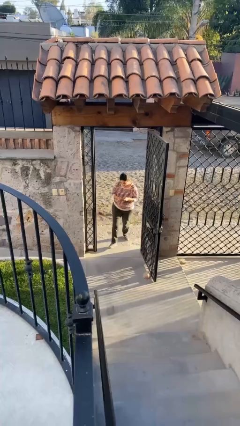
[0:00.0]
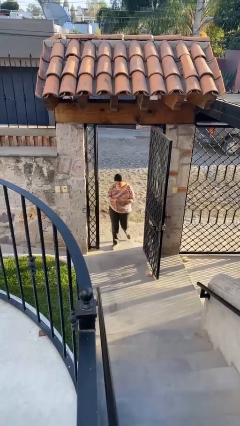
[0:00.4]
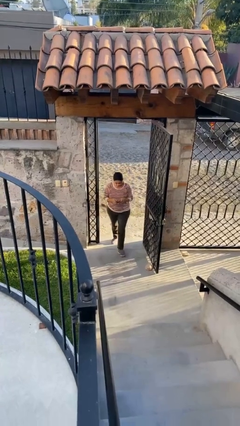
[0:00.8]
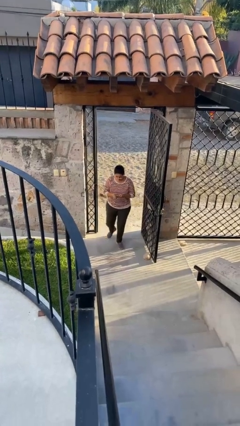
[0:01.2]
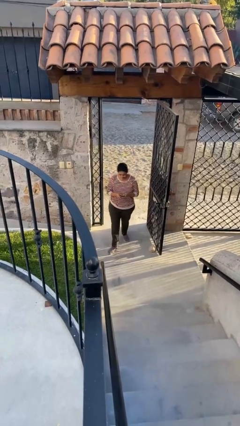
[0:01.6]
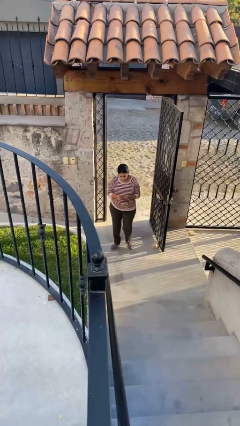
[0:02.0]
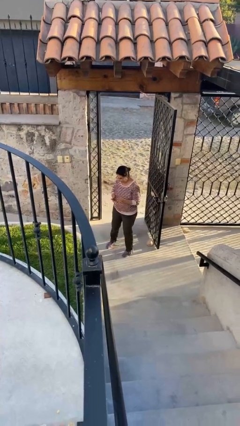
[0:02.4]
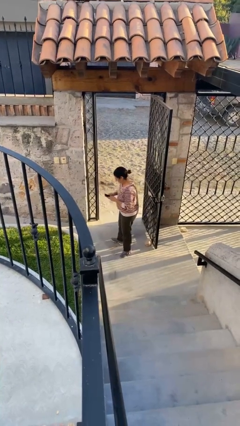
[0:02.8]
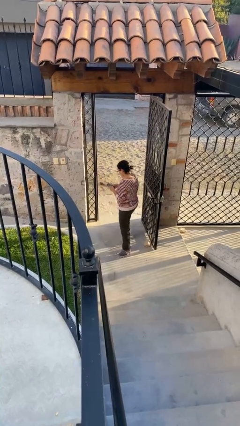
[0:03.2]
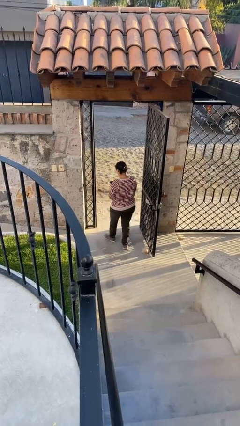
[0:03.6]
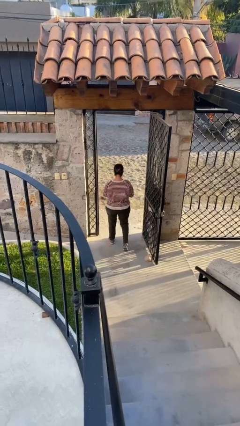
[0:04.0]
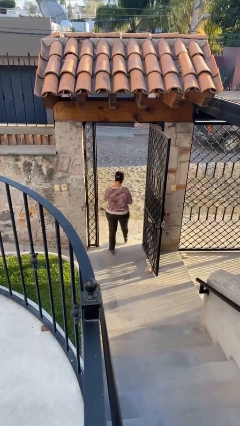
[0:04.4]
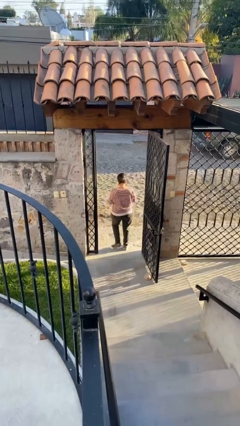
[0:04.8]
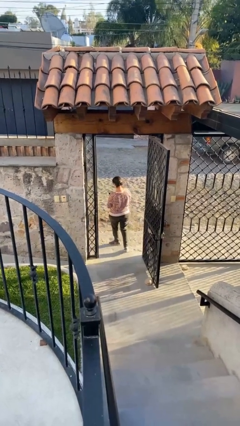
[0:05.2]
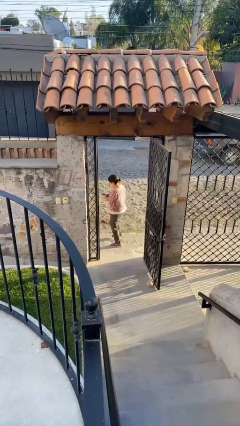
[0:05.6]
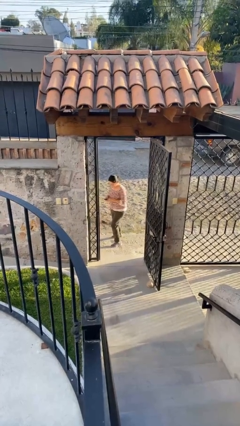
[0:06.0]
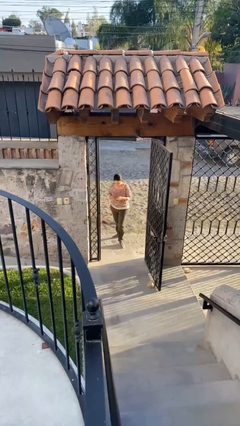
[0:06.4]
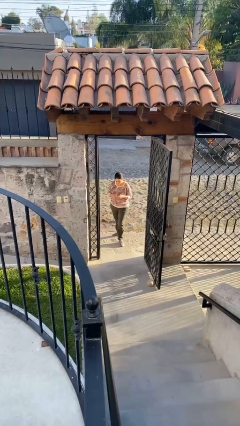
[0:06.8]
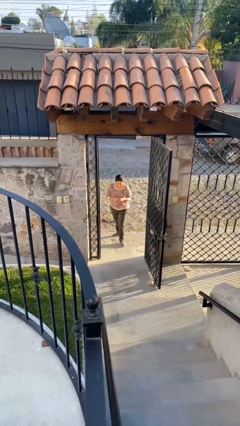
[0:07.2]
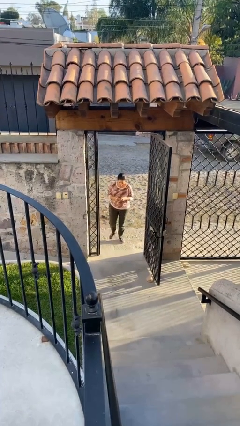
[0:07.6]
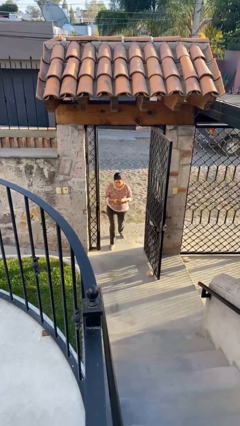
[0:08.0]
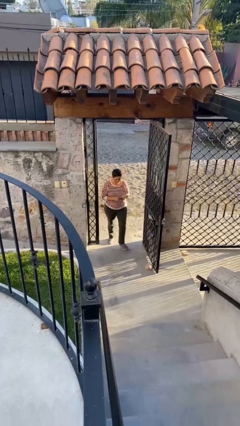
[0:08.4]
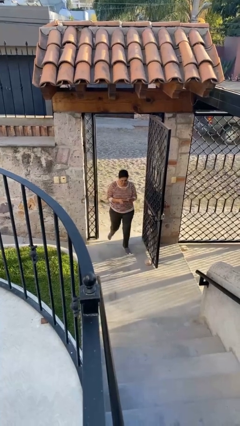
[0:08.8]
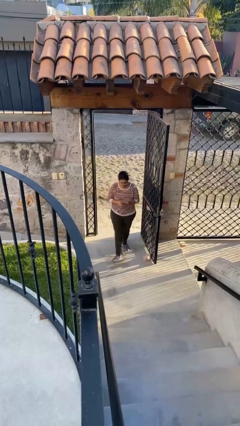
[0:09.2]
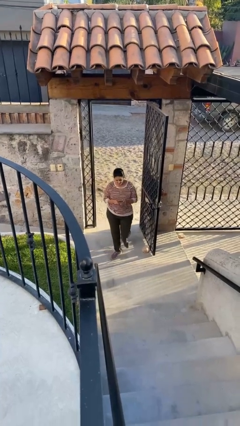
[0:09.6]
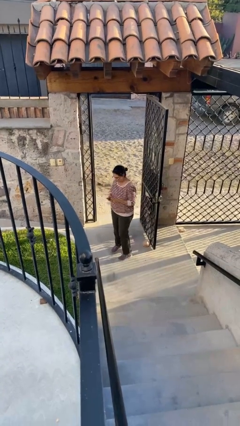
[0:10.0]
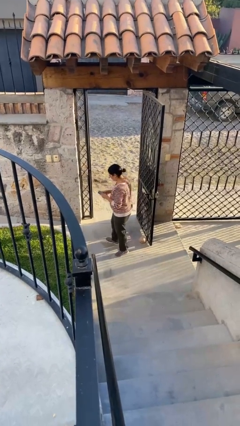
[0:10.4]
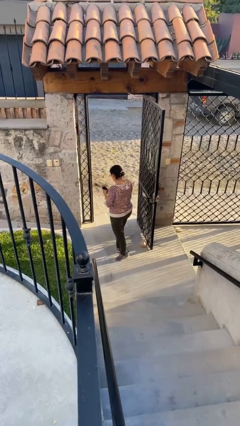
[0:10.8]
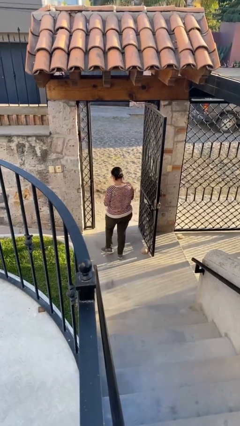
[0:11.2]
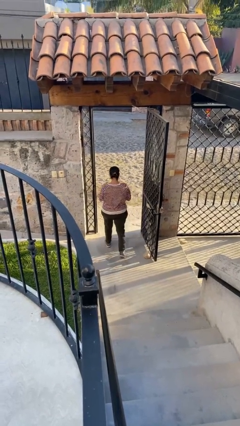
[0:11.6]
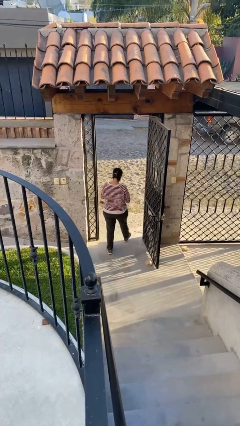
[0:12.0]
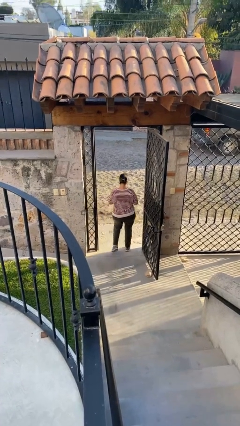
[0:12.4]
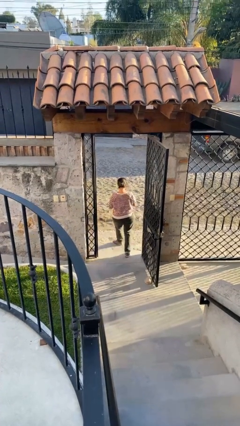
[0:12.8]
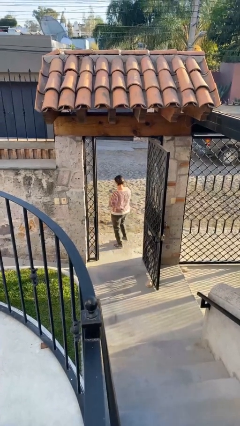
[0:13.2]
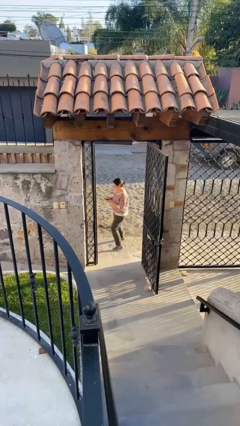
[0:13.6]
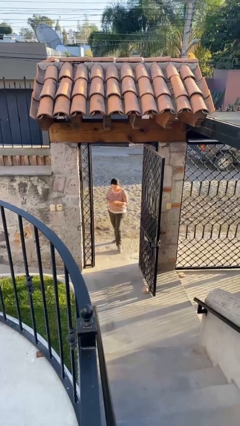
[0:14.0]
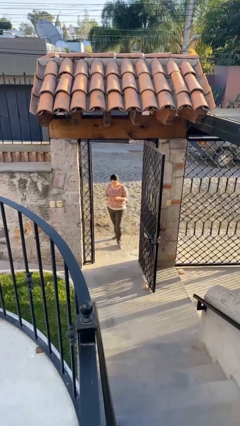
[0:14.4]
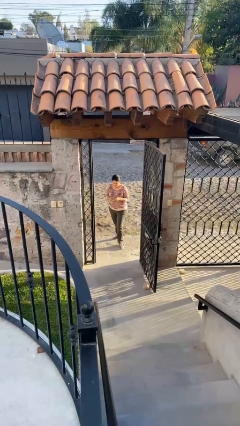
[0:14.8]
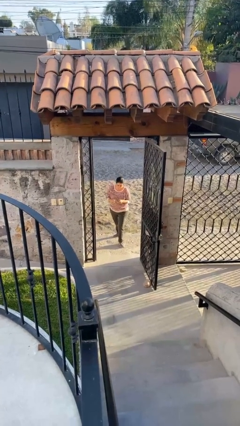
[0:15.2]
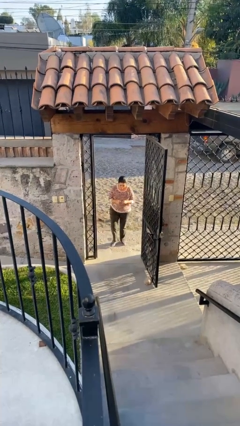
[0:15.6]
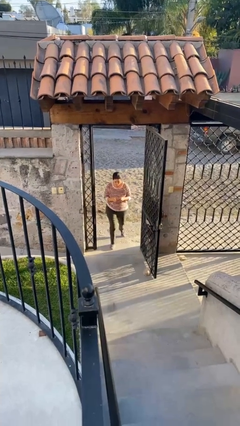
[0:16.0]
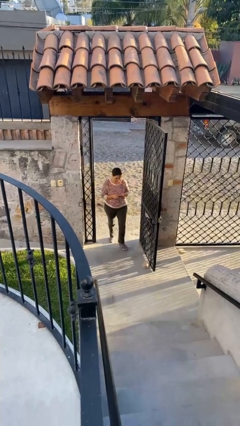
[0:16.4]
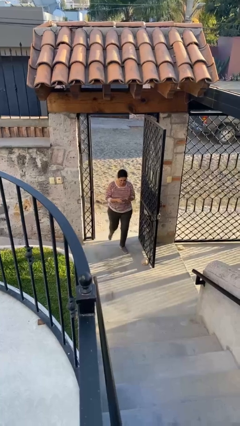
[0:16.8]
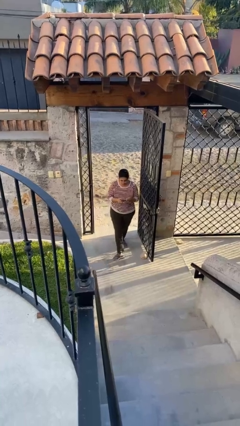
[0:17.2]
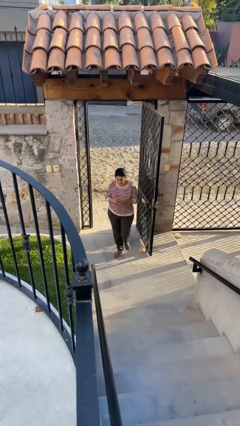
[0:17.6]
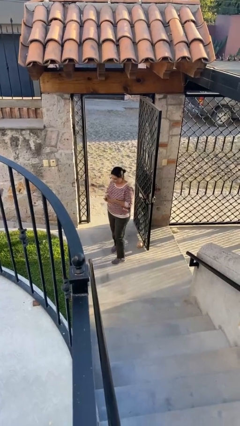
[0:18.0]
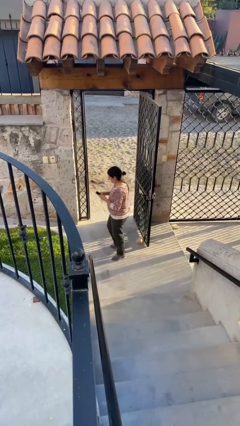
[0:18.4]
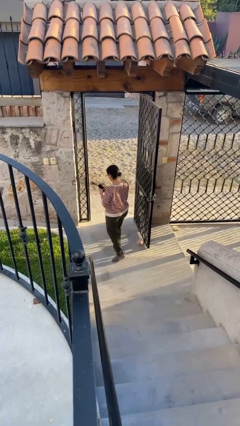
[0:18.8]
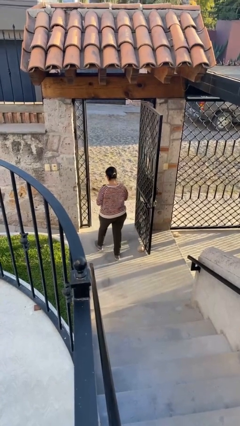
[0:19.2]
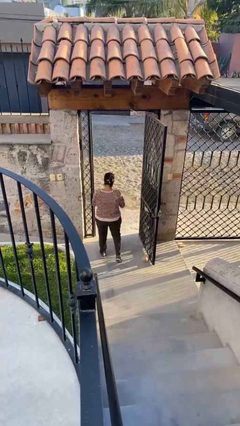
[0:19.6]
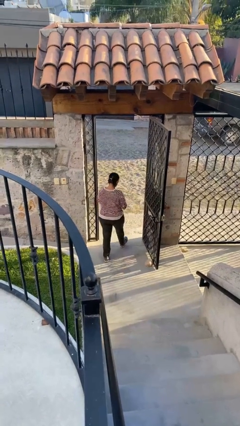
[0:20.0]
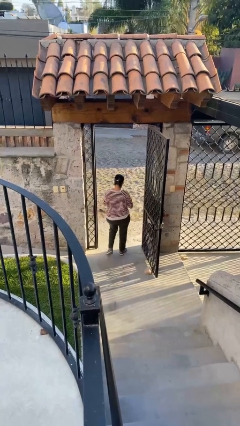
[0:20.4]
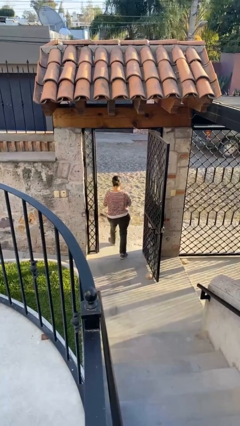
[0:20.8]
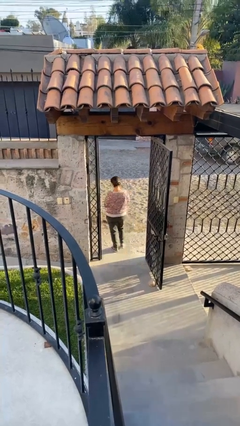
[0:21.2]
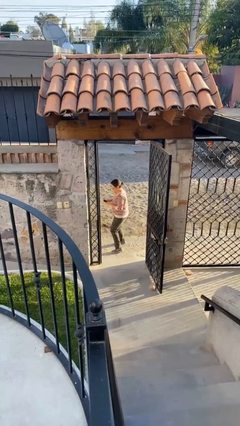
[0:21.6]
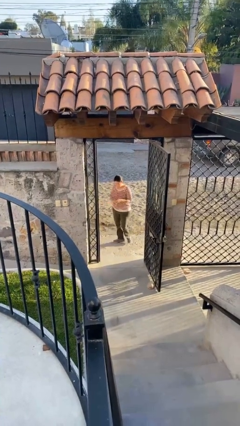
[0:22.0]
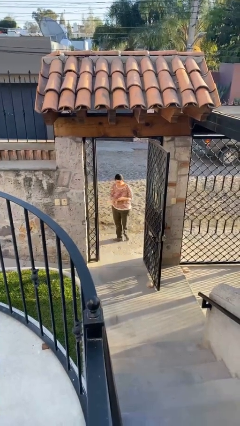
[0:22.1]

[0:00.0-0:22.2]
person texts on phone

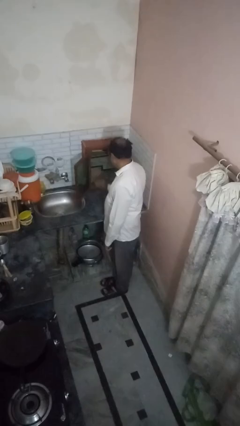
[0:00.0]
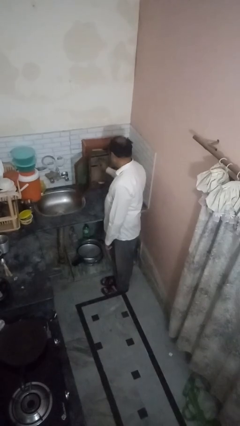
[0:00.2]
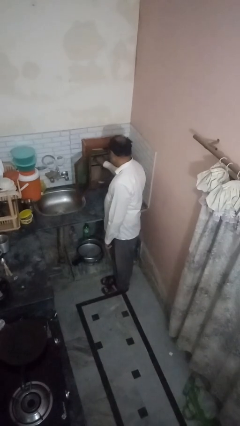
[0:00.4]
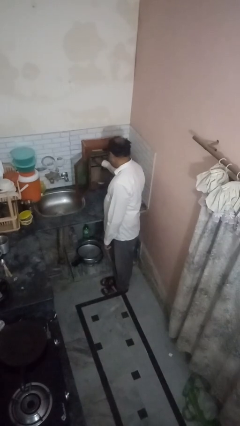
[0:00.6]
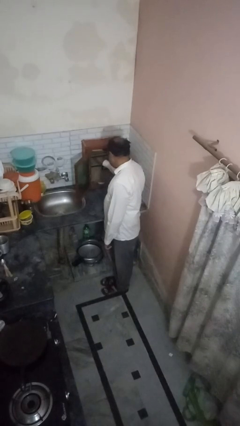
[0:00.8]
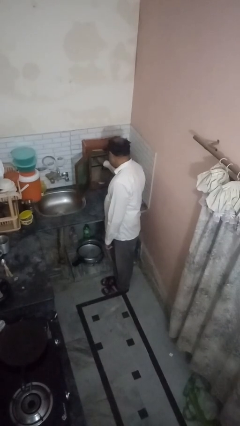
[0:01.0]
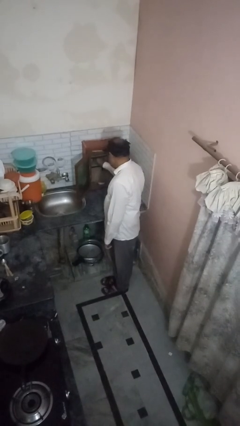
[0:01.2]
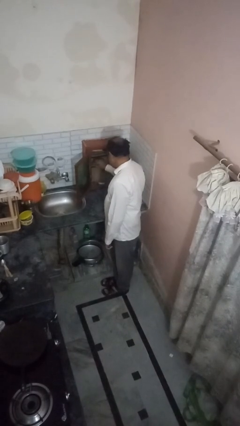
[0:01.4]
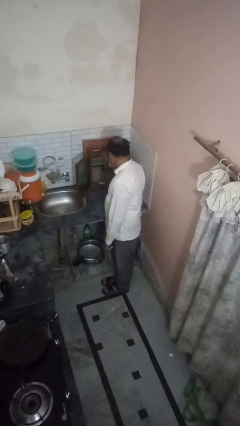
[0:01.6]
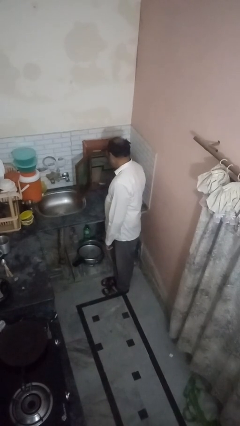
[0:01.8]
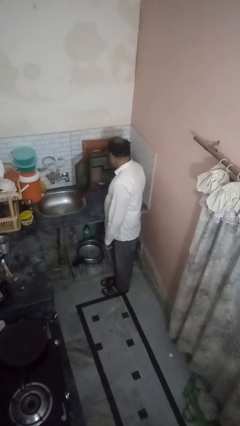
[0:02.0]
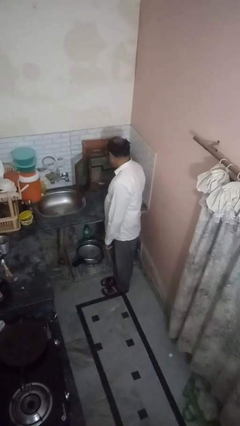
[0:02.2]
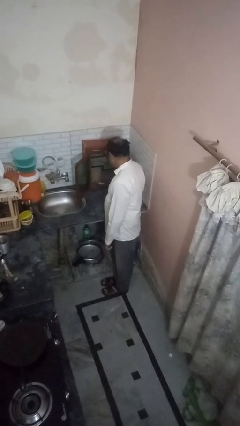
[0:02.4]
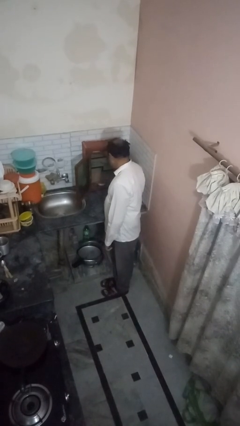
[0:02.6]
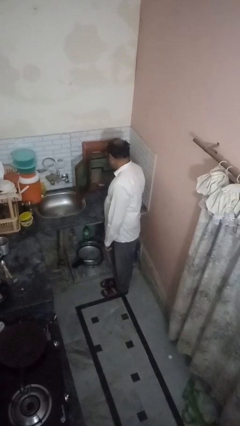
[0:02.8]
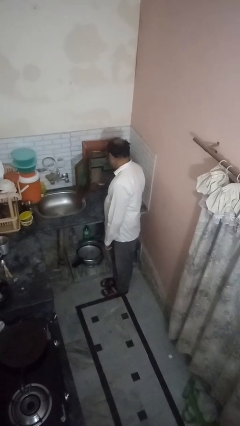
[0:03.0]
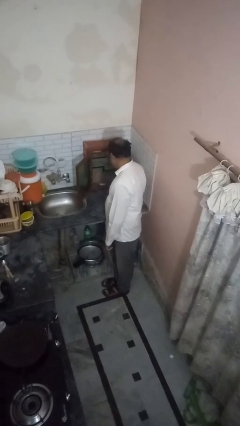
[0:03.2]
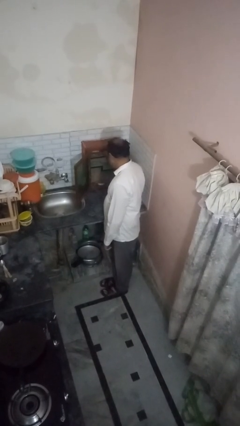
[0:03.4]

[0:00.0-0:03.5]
person searches in kitchen drawer

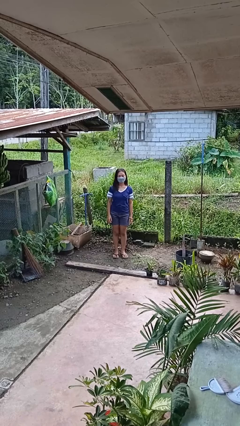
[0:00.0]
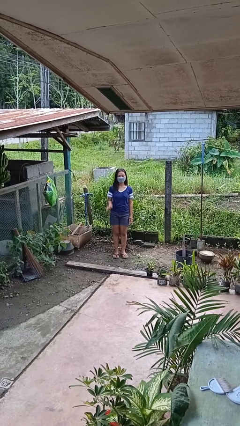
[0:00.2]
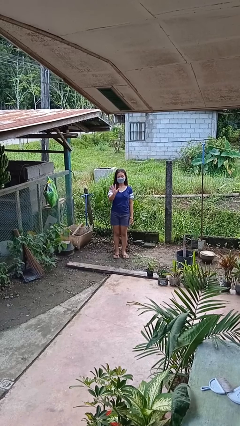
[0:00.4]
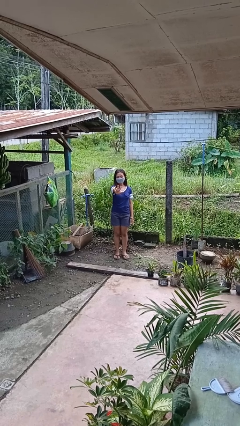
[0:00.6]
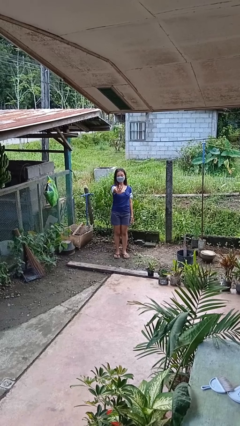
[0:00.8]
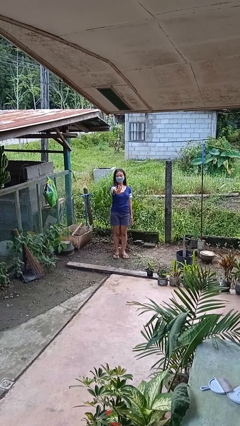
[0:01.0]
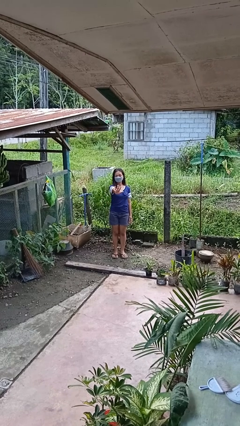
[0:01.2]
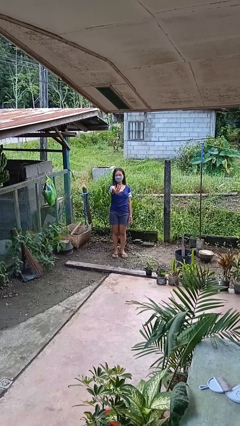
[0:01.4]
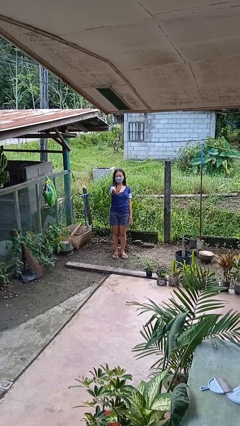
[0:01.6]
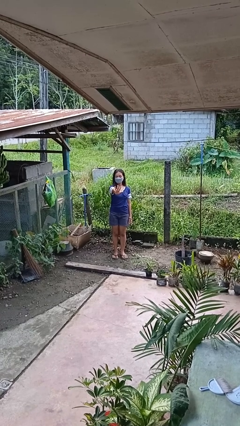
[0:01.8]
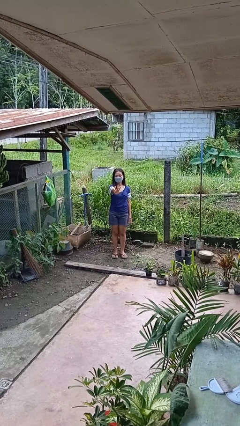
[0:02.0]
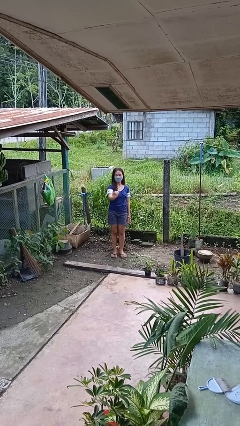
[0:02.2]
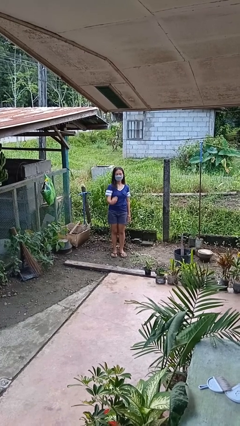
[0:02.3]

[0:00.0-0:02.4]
person gestures number five

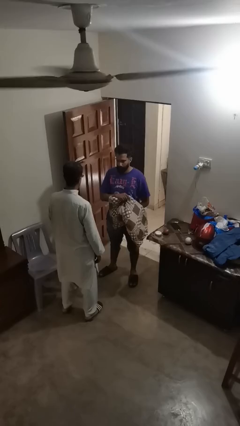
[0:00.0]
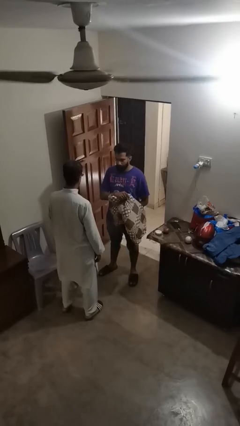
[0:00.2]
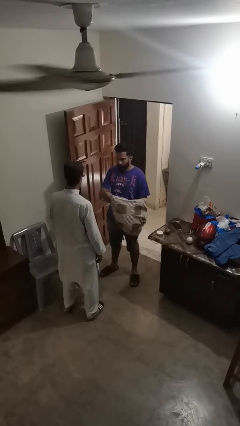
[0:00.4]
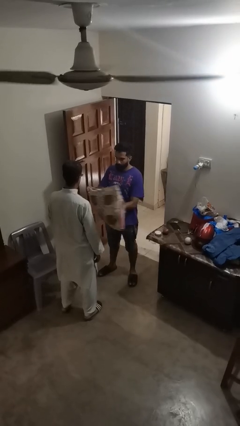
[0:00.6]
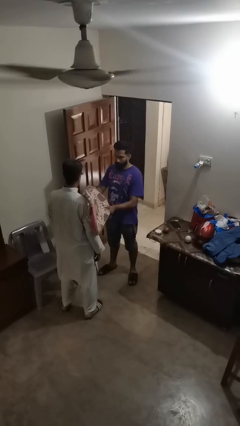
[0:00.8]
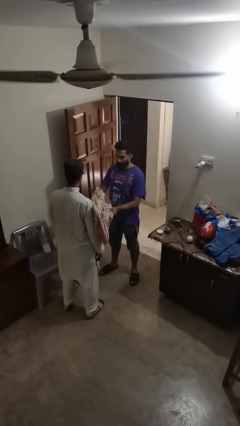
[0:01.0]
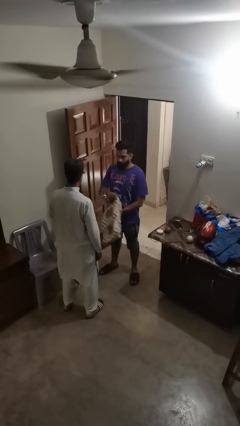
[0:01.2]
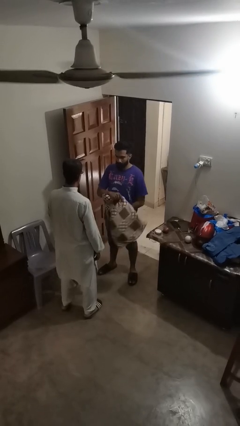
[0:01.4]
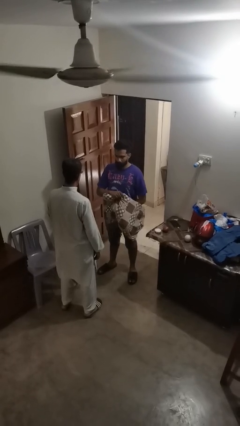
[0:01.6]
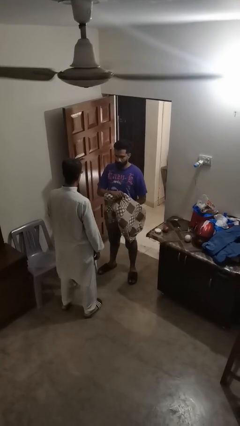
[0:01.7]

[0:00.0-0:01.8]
person hits person with pillow
